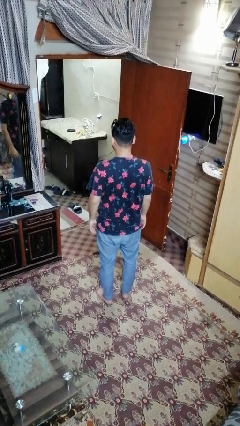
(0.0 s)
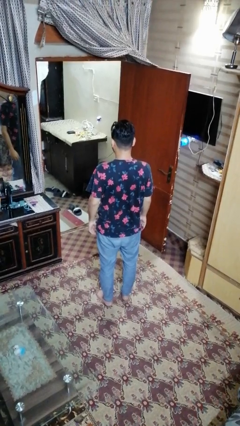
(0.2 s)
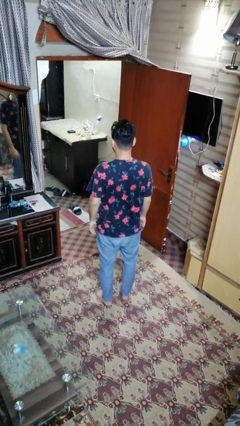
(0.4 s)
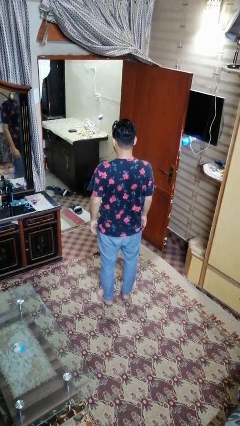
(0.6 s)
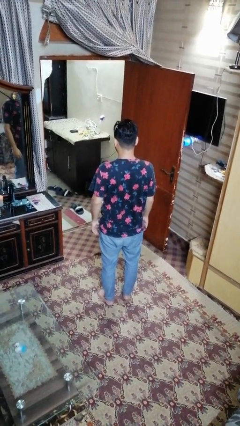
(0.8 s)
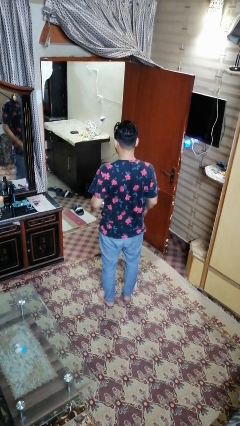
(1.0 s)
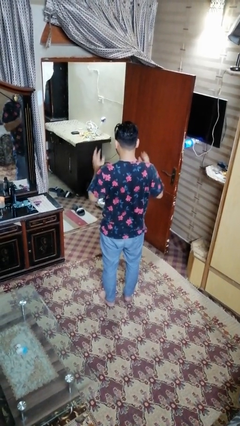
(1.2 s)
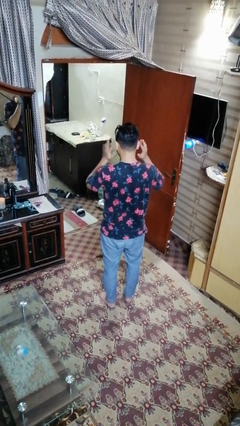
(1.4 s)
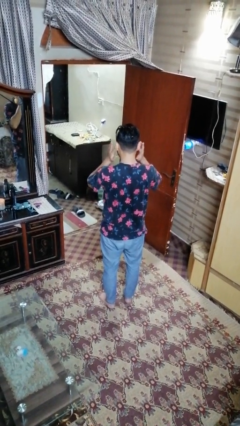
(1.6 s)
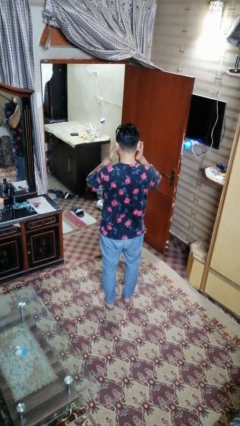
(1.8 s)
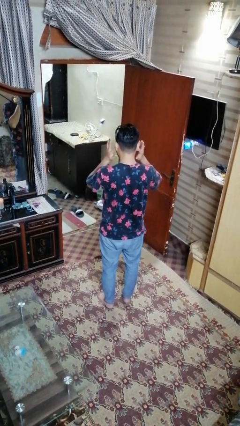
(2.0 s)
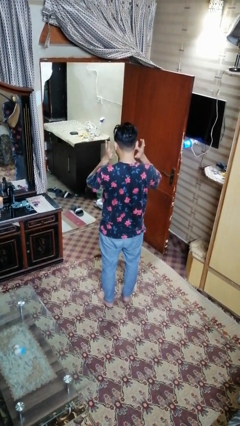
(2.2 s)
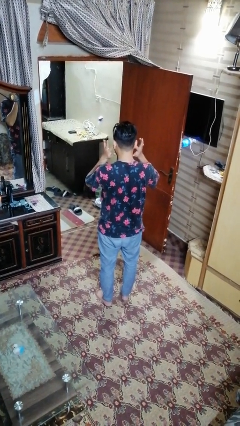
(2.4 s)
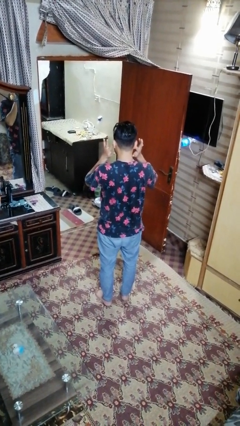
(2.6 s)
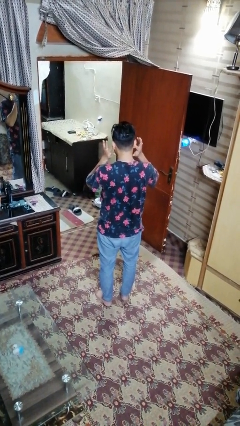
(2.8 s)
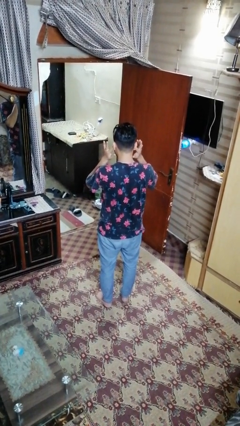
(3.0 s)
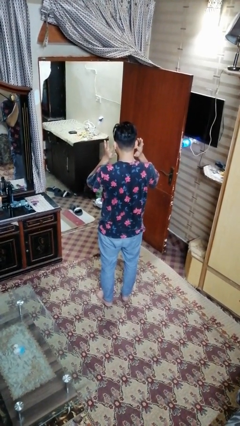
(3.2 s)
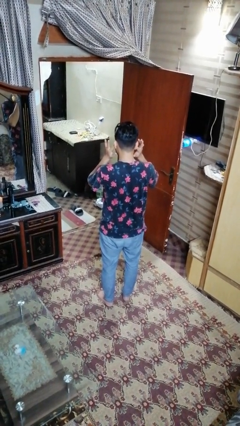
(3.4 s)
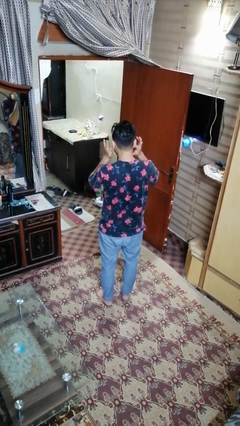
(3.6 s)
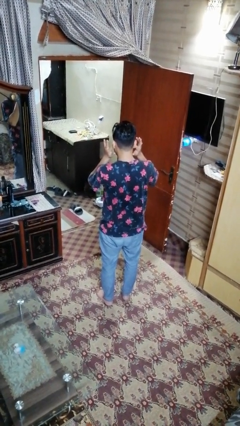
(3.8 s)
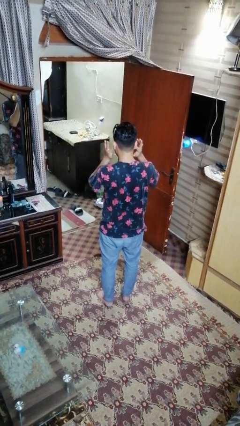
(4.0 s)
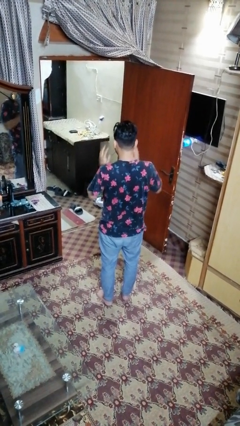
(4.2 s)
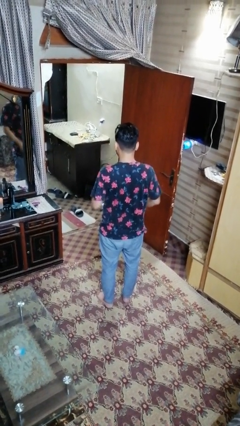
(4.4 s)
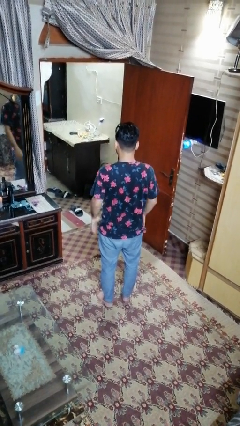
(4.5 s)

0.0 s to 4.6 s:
person puts fingers in ear

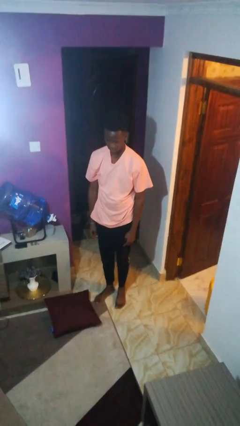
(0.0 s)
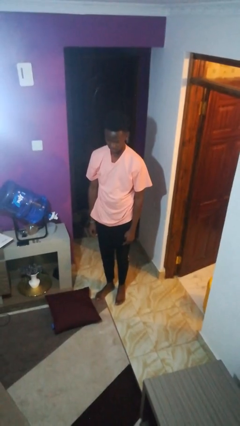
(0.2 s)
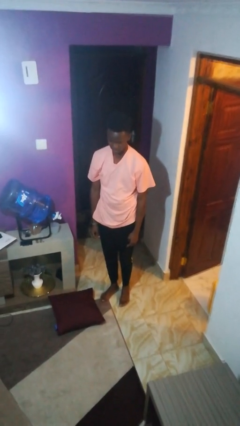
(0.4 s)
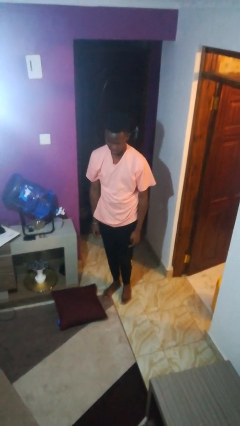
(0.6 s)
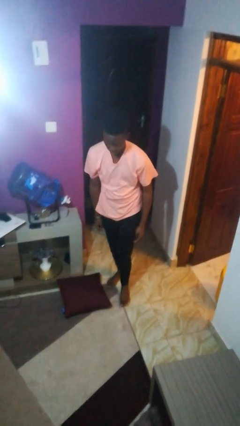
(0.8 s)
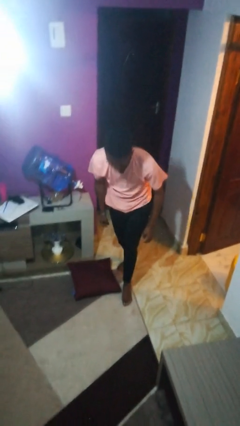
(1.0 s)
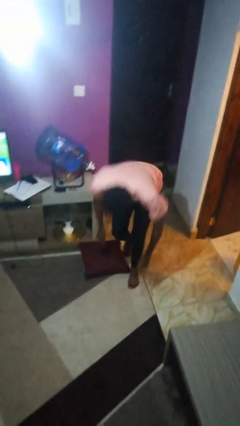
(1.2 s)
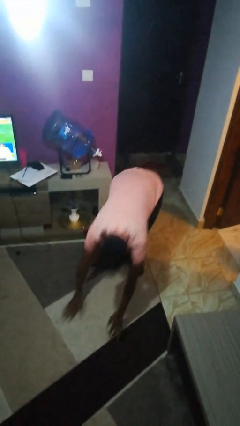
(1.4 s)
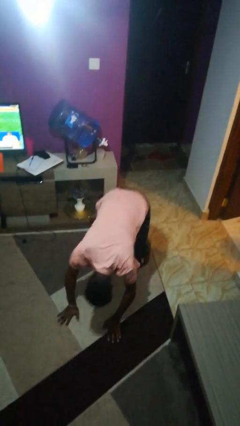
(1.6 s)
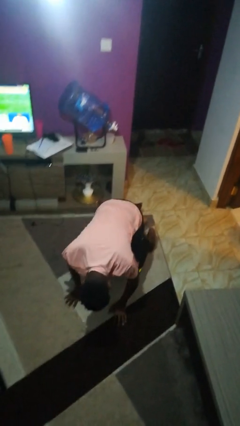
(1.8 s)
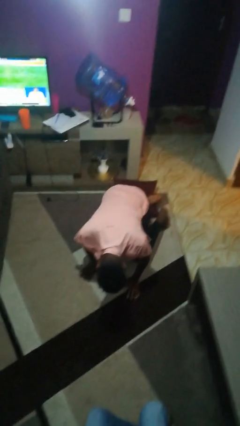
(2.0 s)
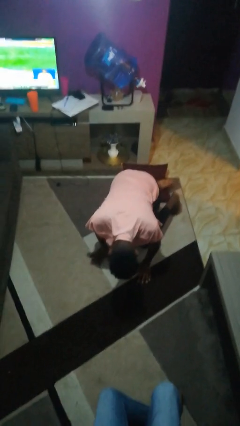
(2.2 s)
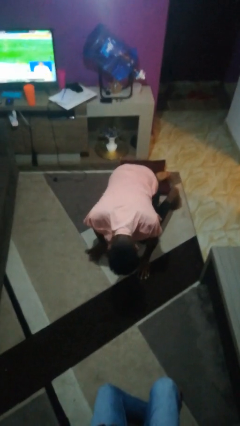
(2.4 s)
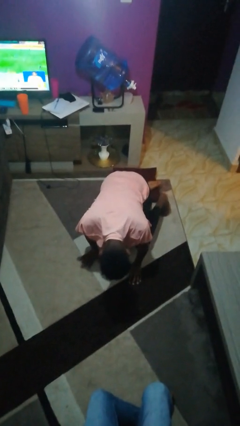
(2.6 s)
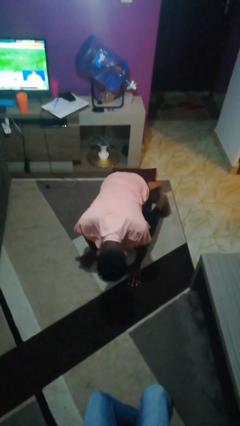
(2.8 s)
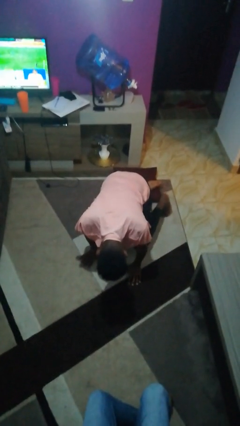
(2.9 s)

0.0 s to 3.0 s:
person trips on object on floor

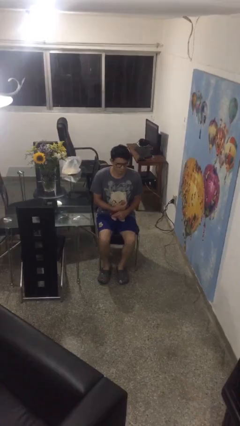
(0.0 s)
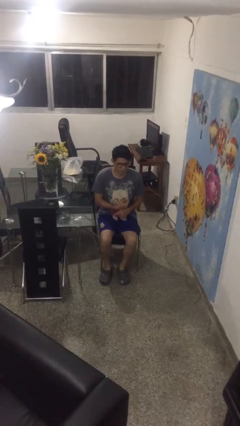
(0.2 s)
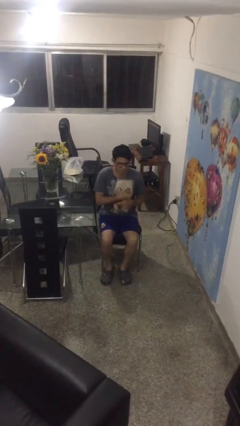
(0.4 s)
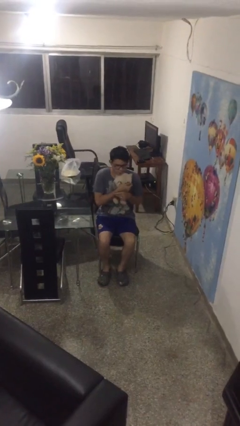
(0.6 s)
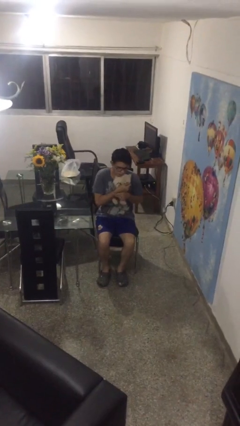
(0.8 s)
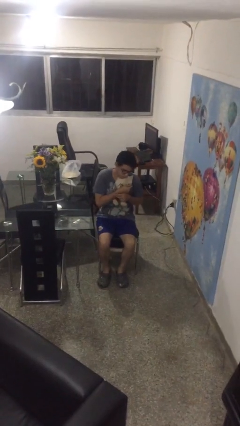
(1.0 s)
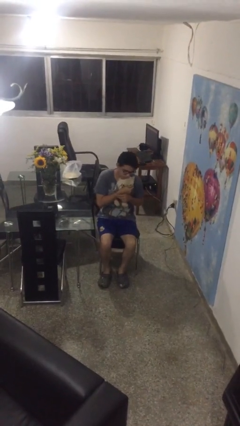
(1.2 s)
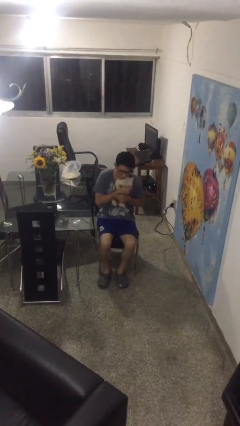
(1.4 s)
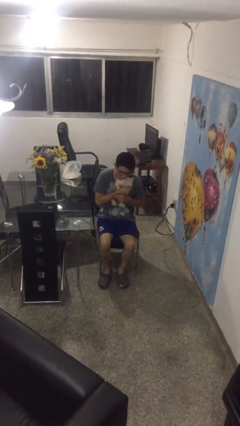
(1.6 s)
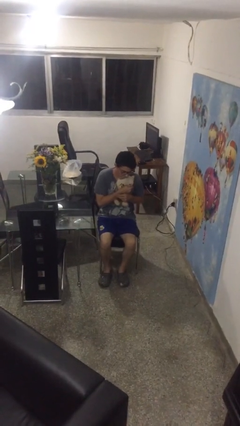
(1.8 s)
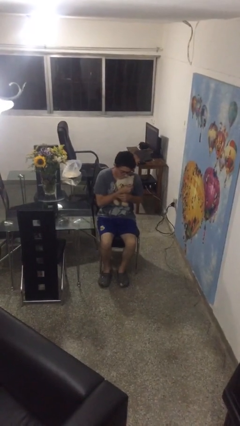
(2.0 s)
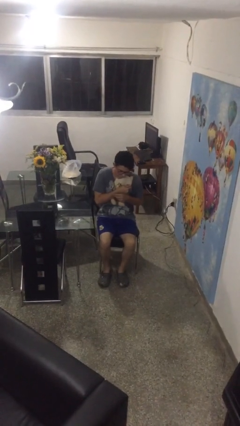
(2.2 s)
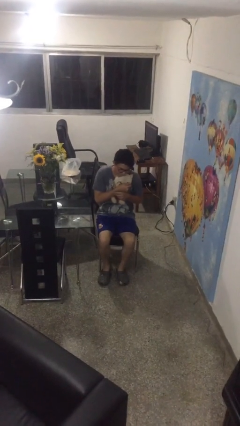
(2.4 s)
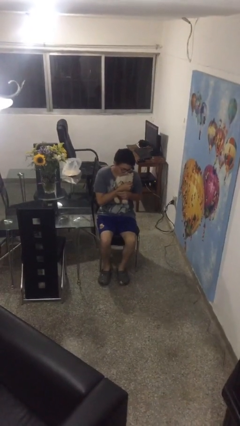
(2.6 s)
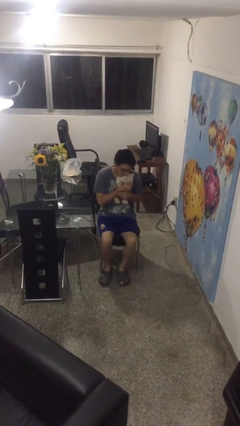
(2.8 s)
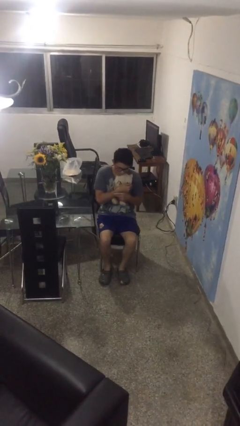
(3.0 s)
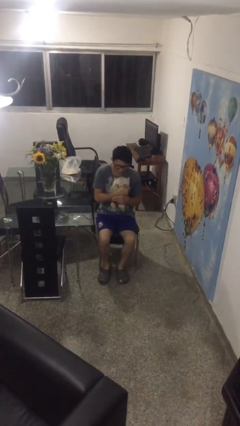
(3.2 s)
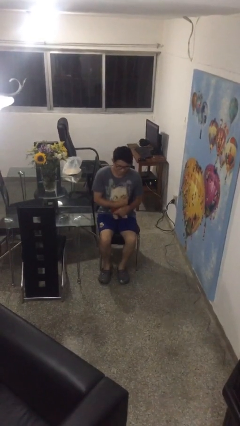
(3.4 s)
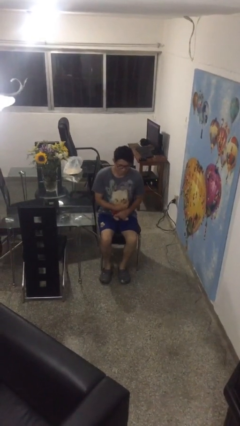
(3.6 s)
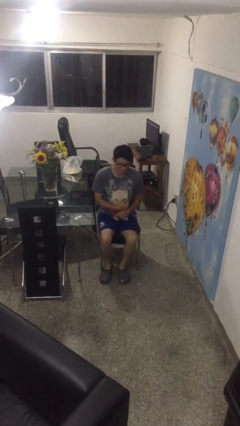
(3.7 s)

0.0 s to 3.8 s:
person hugs stuffed animal

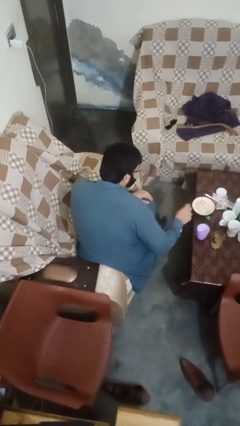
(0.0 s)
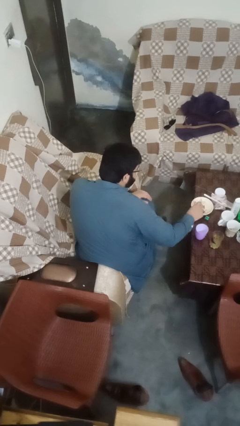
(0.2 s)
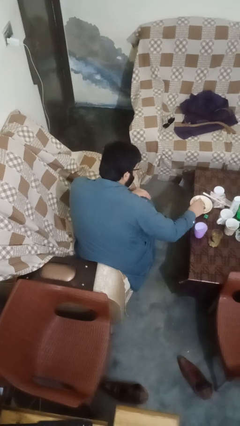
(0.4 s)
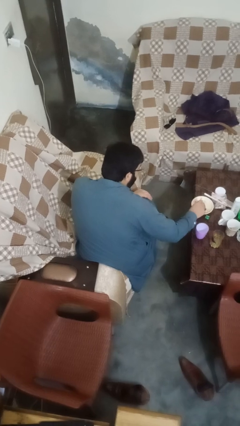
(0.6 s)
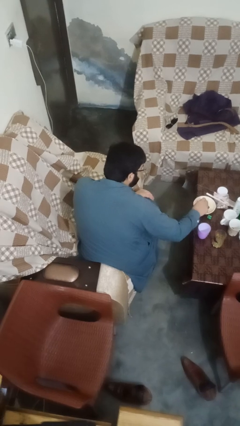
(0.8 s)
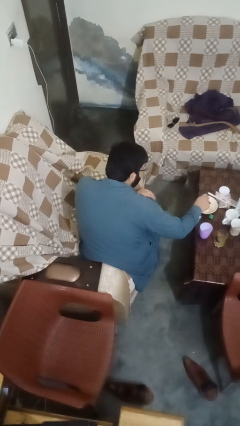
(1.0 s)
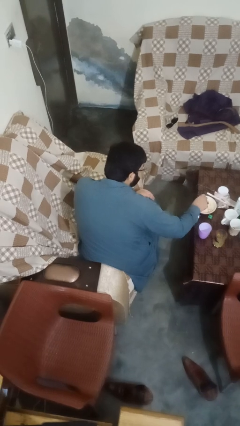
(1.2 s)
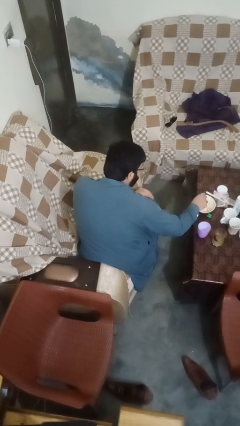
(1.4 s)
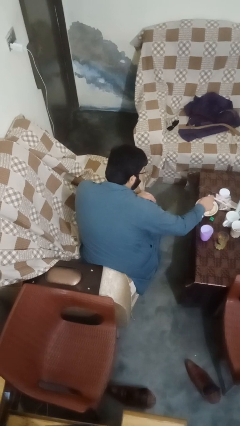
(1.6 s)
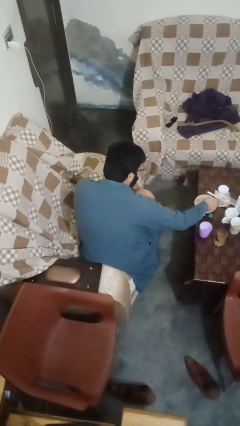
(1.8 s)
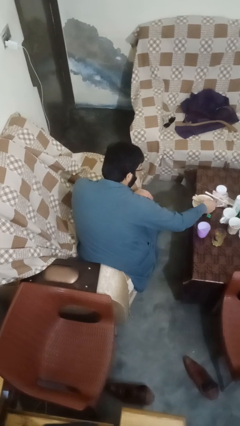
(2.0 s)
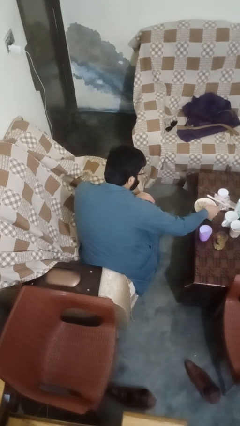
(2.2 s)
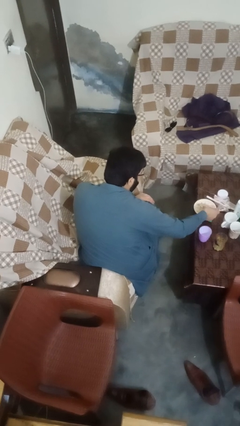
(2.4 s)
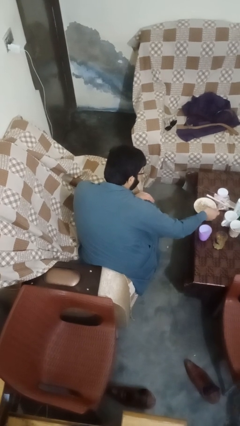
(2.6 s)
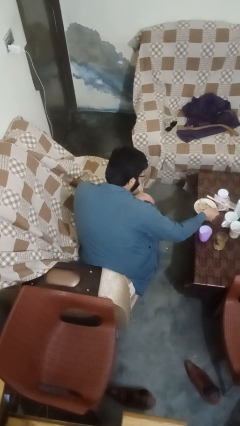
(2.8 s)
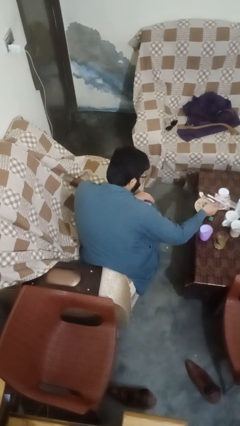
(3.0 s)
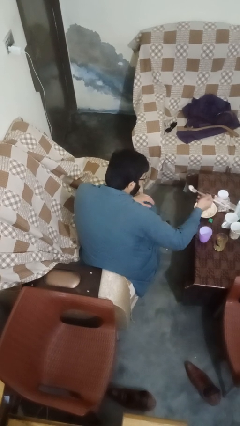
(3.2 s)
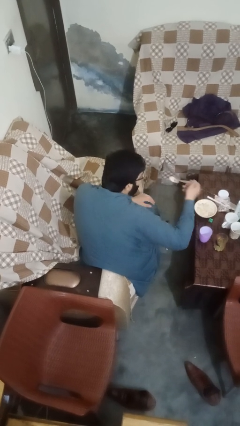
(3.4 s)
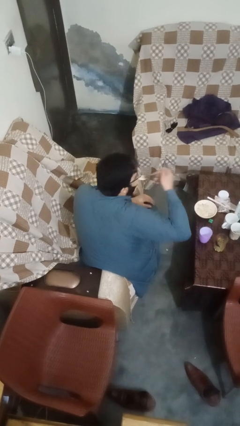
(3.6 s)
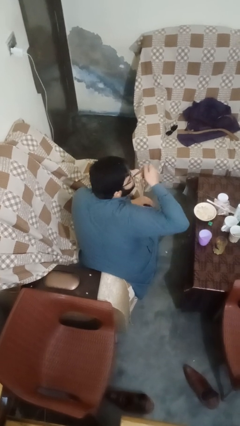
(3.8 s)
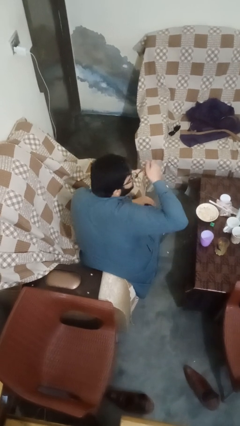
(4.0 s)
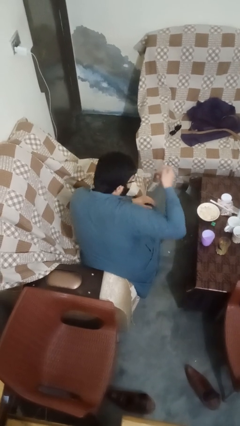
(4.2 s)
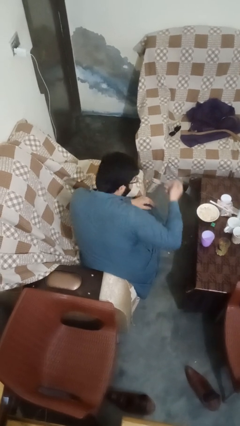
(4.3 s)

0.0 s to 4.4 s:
person eats with utensil

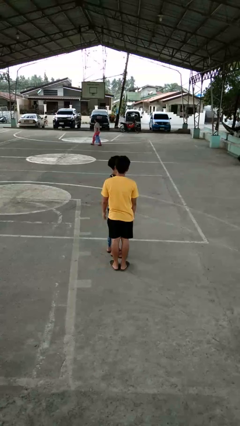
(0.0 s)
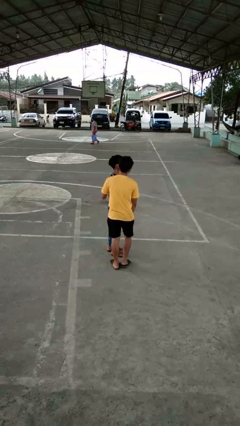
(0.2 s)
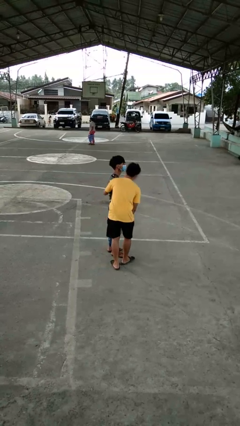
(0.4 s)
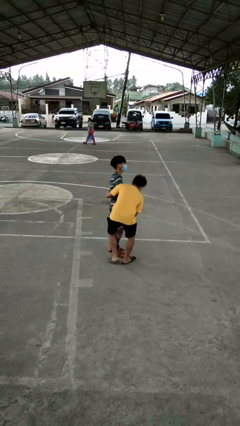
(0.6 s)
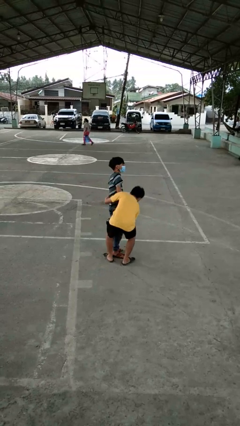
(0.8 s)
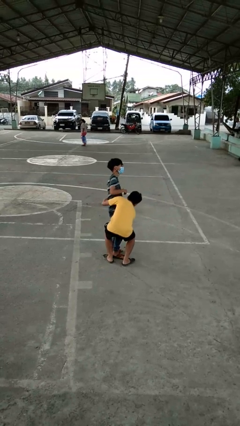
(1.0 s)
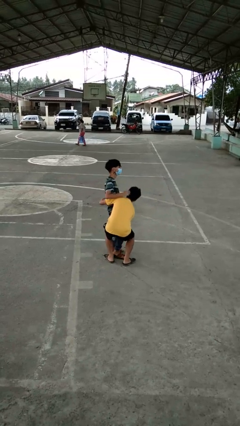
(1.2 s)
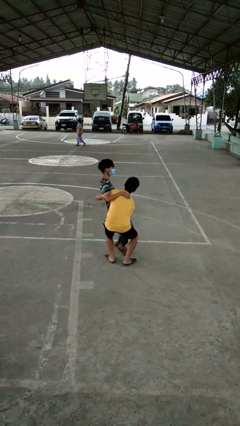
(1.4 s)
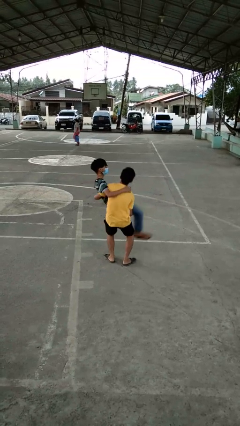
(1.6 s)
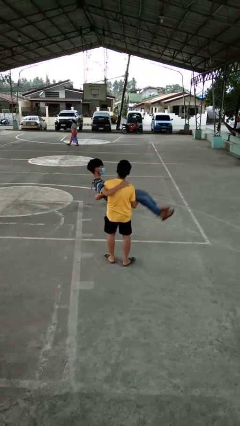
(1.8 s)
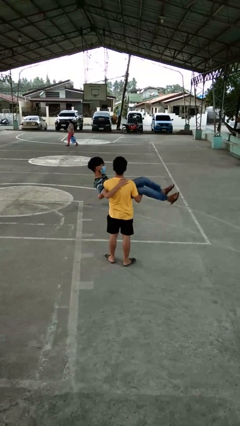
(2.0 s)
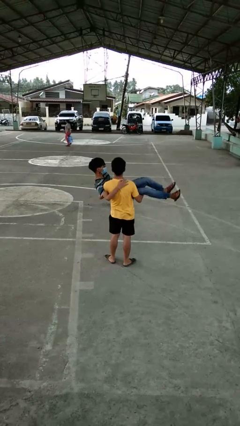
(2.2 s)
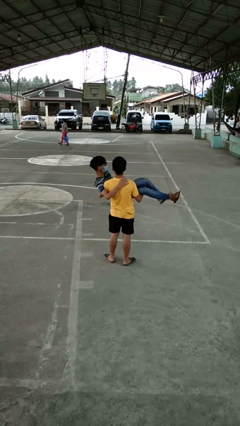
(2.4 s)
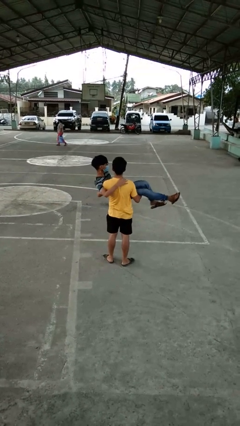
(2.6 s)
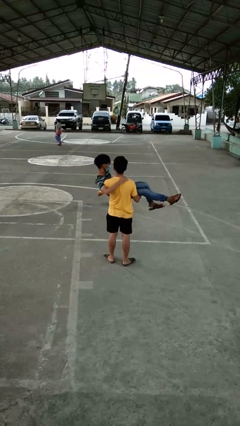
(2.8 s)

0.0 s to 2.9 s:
person picks up person
